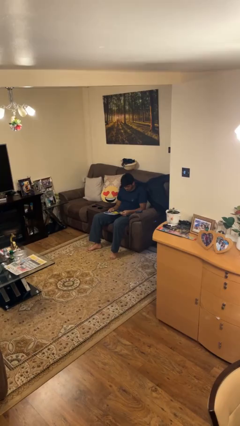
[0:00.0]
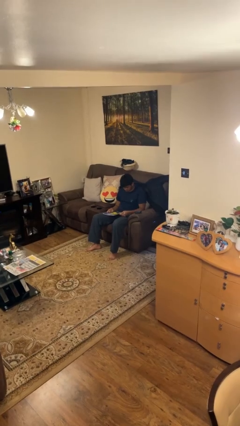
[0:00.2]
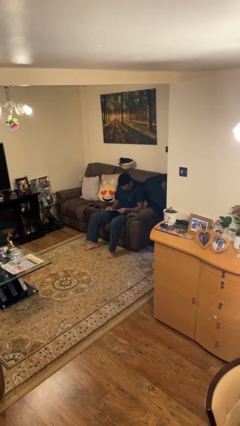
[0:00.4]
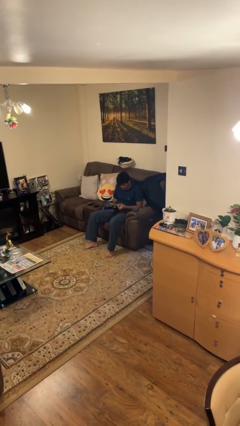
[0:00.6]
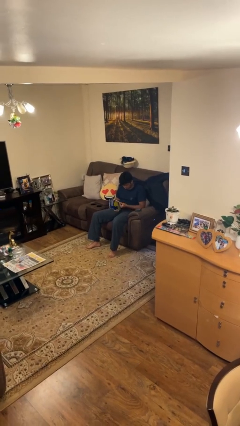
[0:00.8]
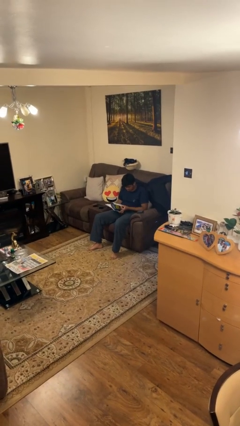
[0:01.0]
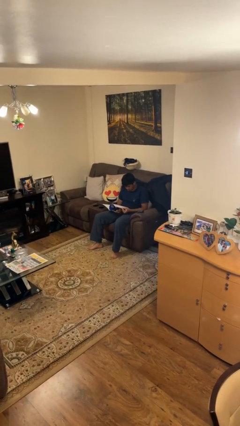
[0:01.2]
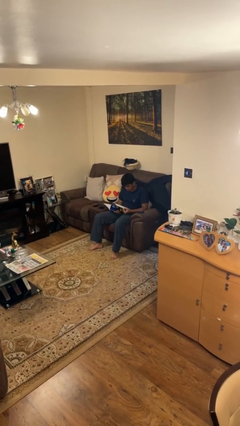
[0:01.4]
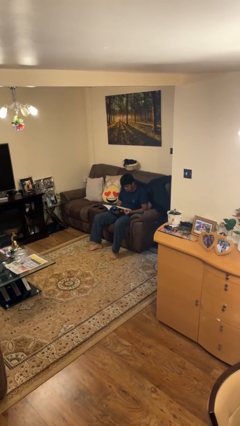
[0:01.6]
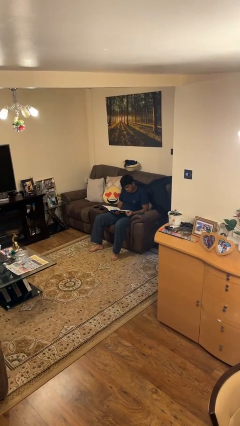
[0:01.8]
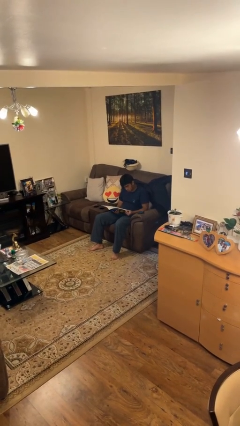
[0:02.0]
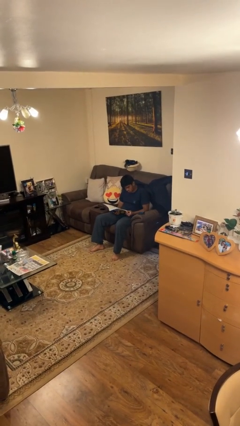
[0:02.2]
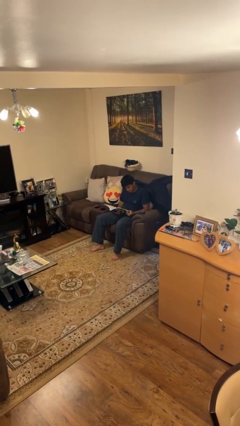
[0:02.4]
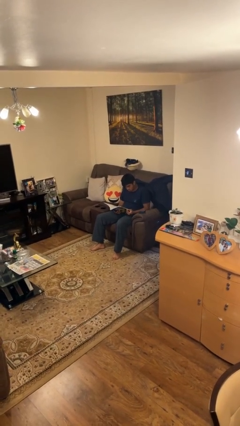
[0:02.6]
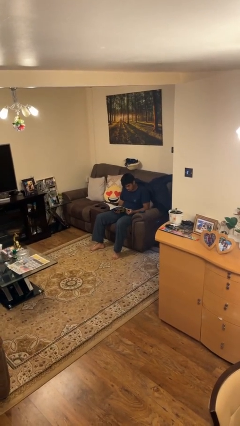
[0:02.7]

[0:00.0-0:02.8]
person reads magazine

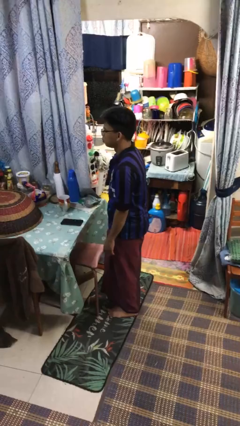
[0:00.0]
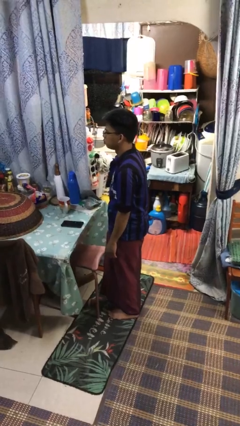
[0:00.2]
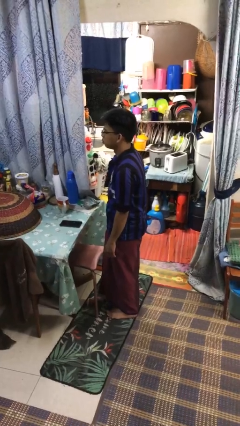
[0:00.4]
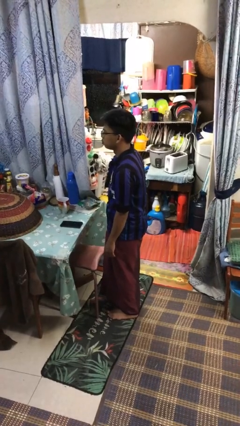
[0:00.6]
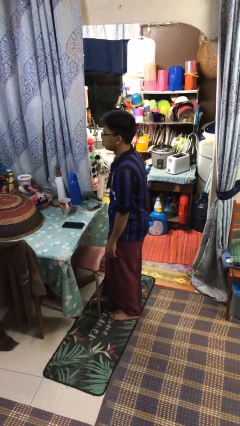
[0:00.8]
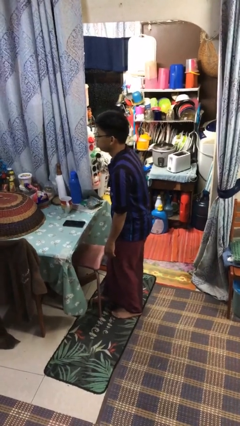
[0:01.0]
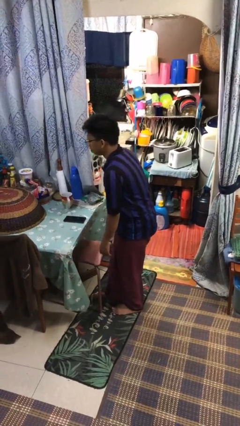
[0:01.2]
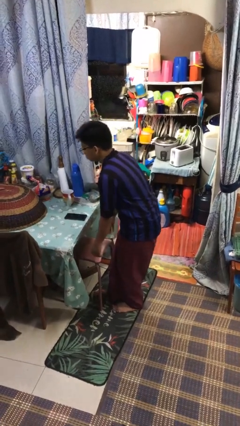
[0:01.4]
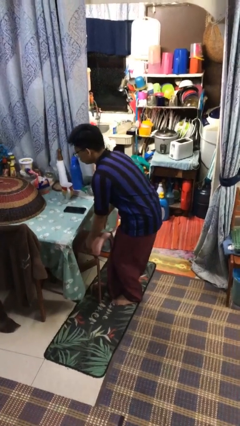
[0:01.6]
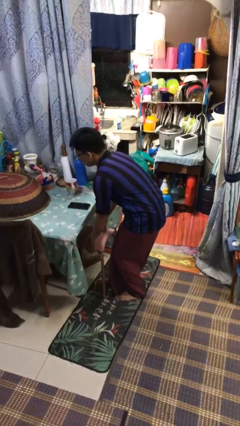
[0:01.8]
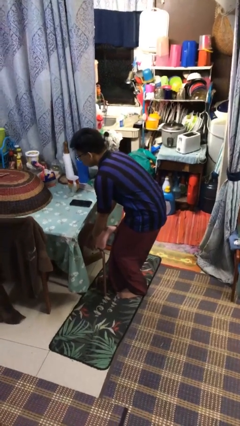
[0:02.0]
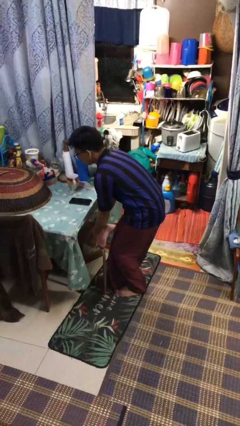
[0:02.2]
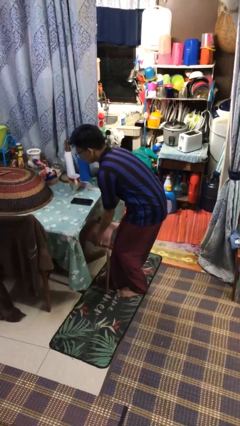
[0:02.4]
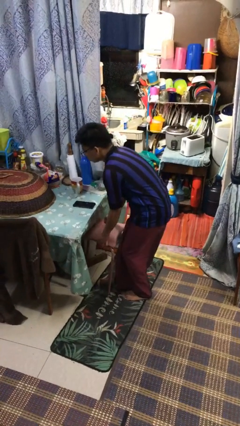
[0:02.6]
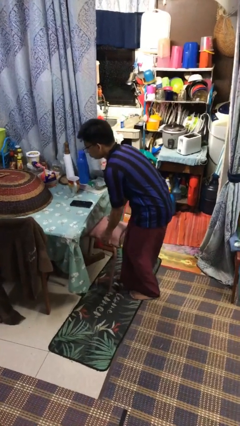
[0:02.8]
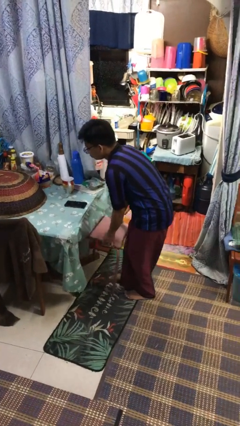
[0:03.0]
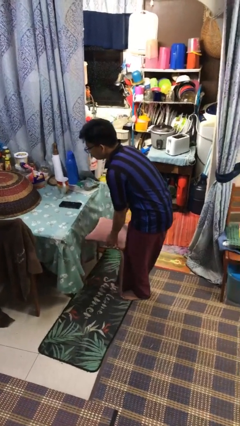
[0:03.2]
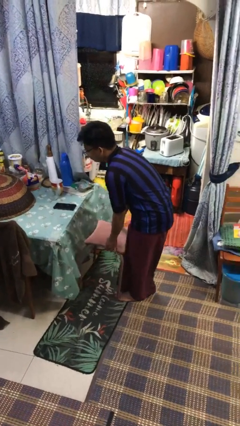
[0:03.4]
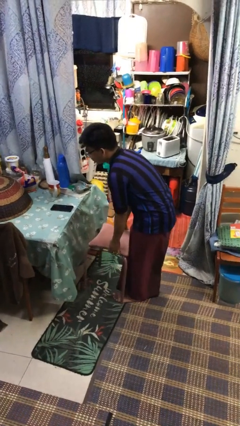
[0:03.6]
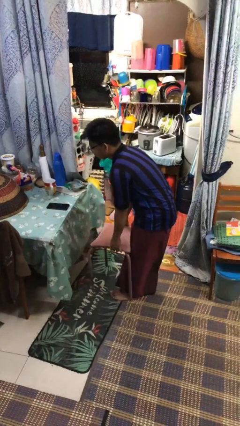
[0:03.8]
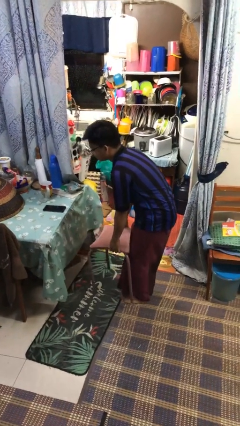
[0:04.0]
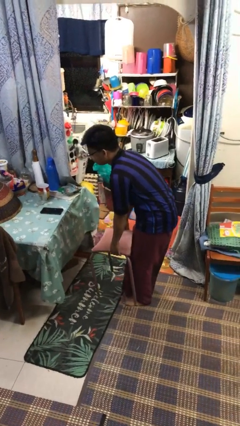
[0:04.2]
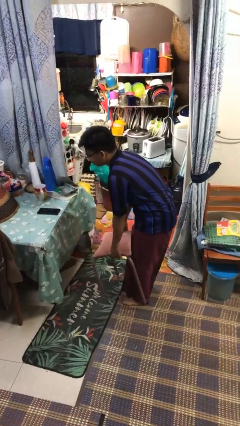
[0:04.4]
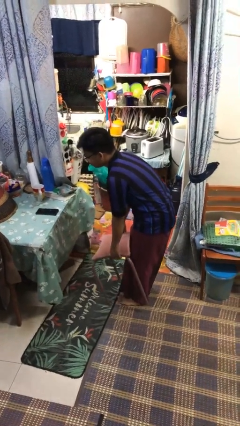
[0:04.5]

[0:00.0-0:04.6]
person pulls out chair

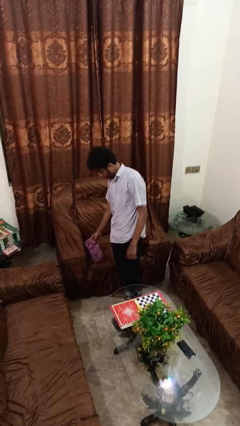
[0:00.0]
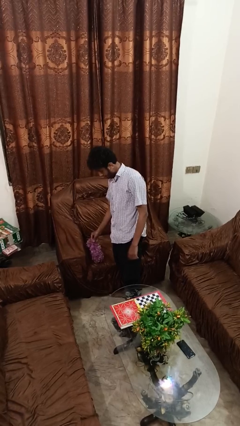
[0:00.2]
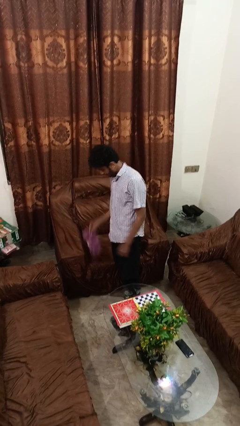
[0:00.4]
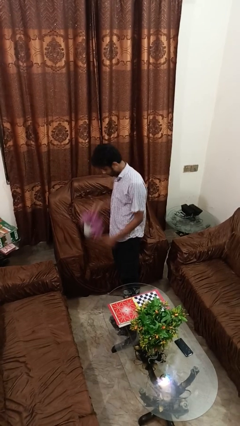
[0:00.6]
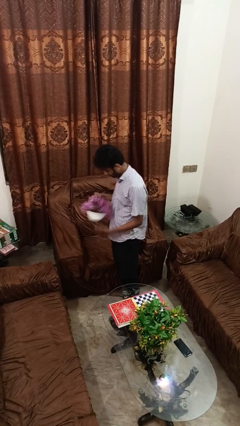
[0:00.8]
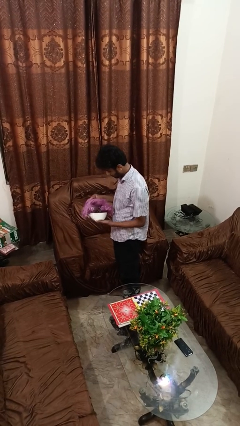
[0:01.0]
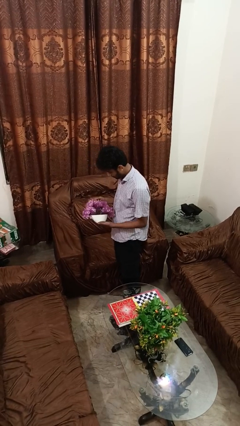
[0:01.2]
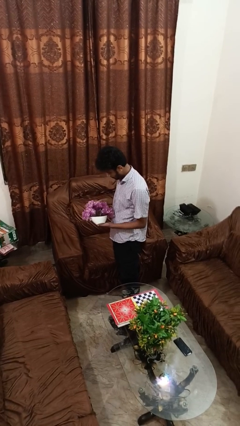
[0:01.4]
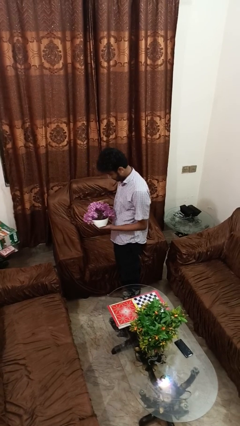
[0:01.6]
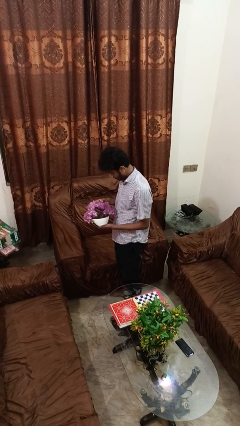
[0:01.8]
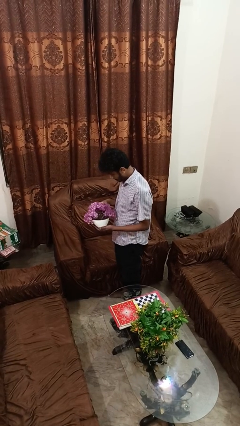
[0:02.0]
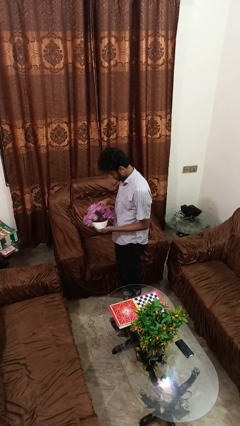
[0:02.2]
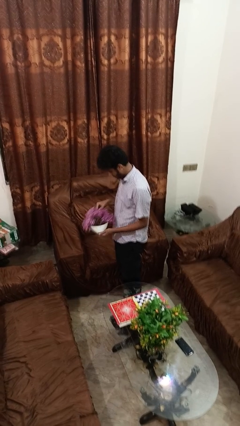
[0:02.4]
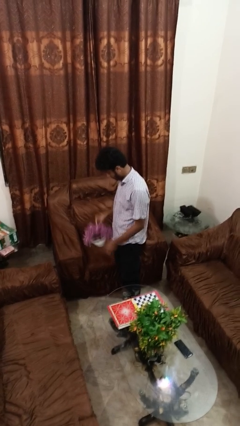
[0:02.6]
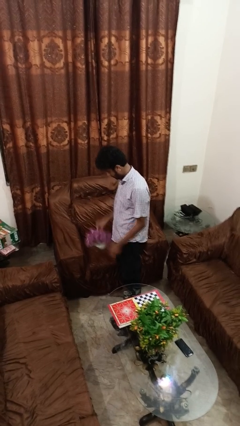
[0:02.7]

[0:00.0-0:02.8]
person picks up object from couch

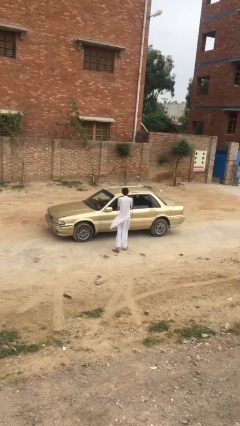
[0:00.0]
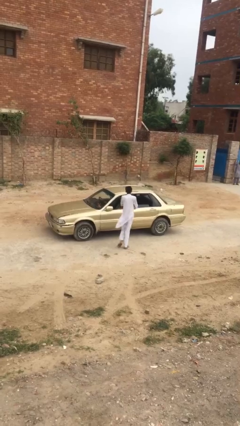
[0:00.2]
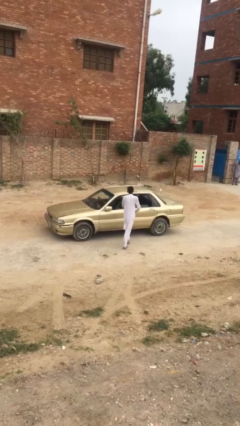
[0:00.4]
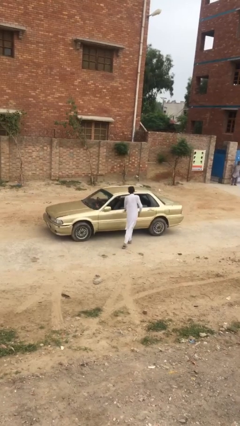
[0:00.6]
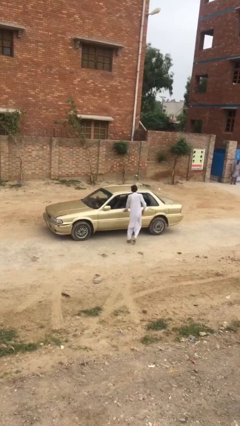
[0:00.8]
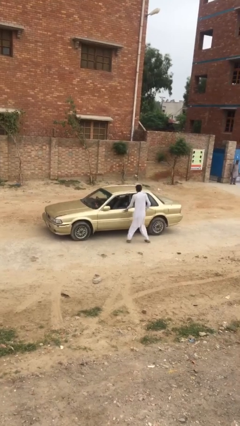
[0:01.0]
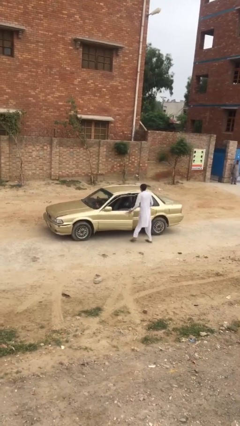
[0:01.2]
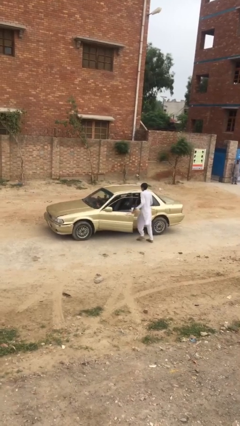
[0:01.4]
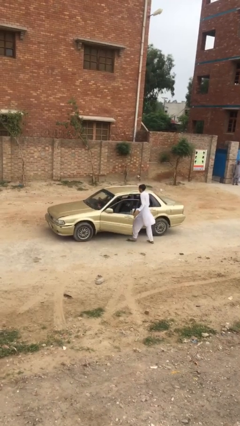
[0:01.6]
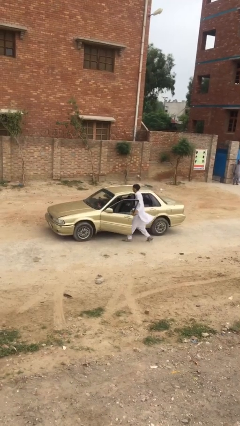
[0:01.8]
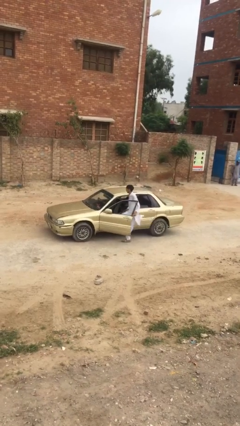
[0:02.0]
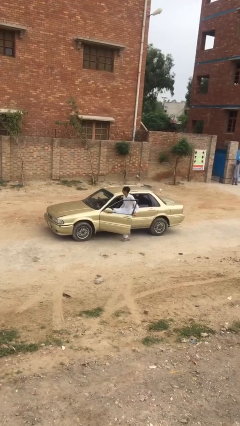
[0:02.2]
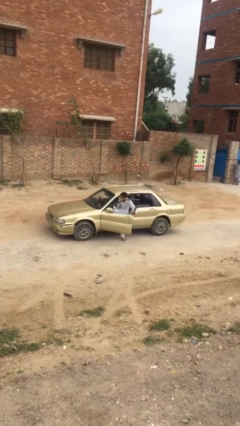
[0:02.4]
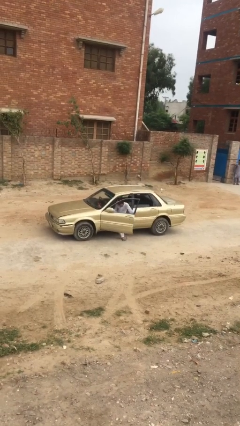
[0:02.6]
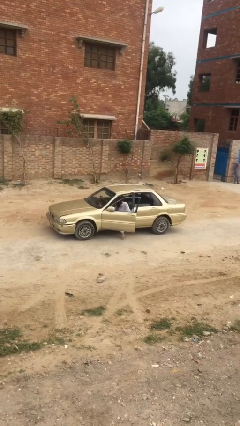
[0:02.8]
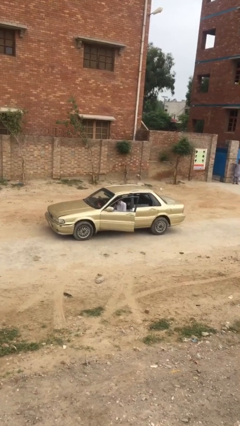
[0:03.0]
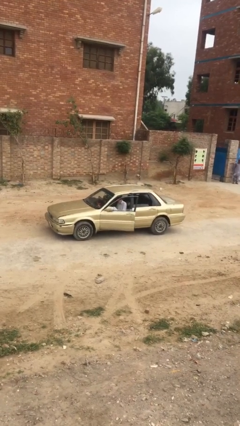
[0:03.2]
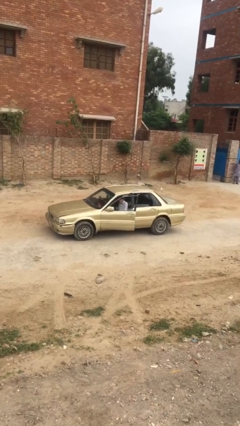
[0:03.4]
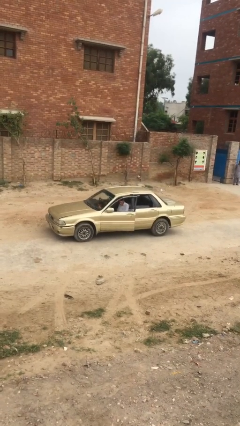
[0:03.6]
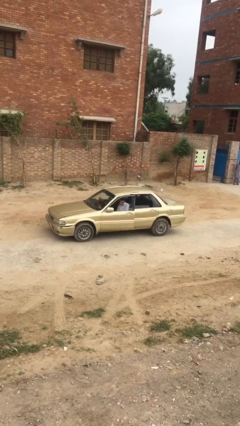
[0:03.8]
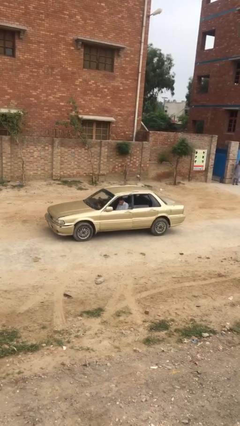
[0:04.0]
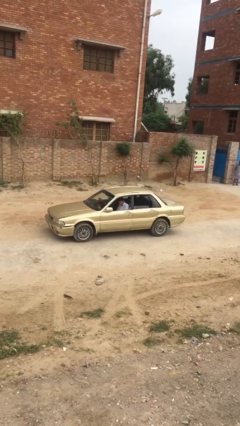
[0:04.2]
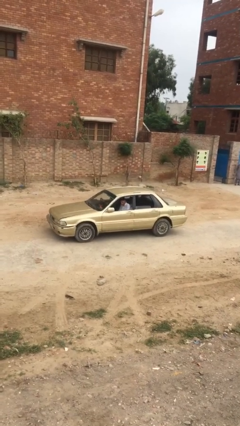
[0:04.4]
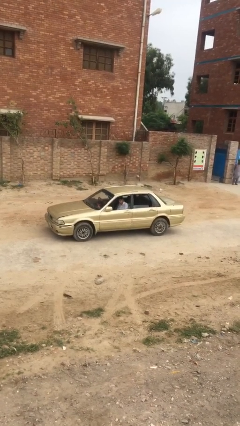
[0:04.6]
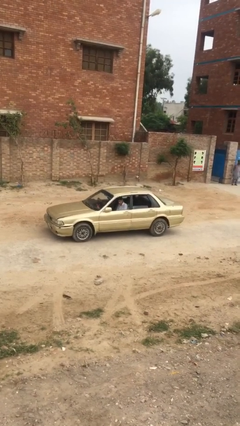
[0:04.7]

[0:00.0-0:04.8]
car picks up person

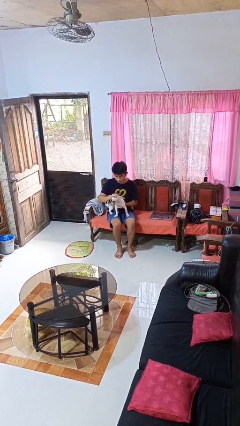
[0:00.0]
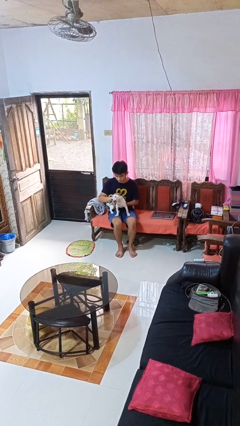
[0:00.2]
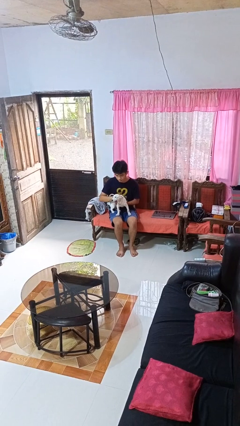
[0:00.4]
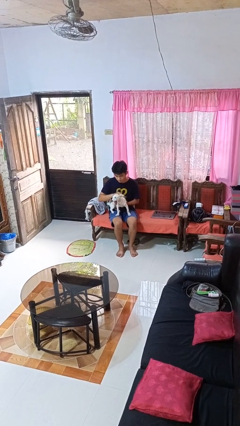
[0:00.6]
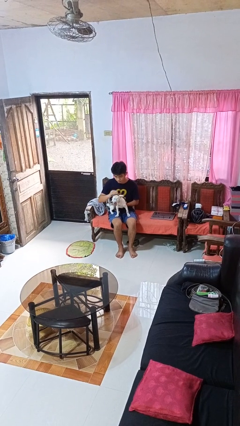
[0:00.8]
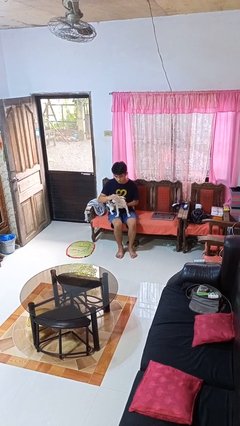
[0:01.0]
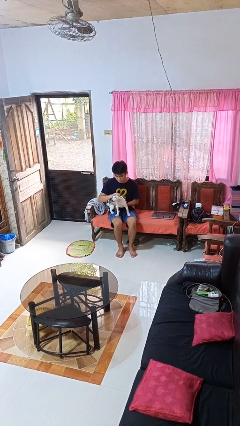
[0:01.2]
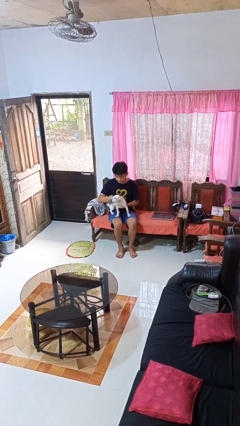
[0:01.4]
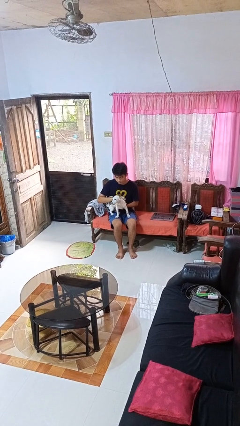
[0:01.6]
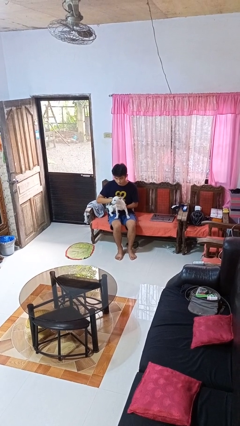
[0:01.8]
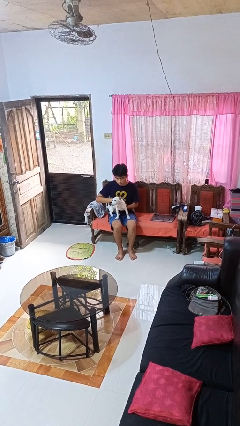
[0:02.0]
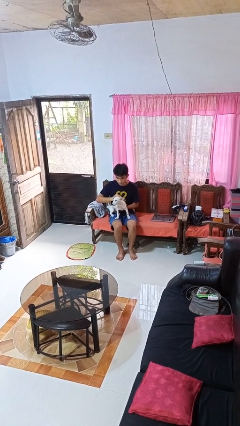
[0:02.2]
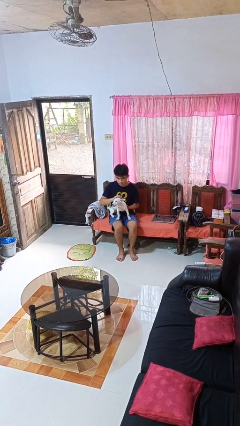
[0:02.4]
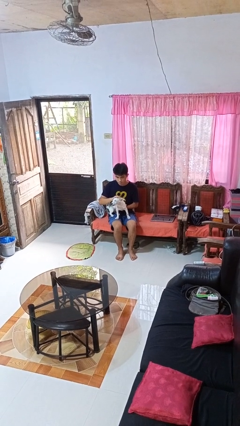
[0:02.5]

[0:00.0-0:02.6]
person pets dog

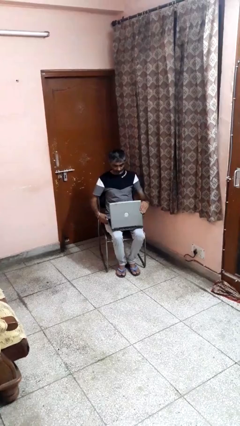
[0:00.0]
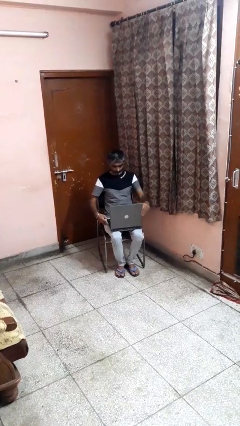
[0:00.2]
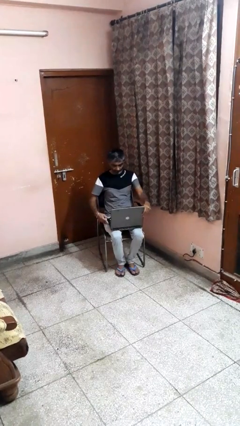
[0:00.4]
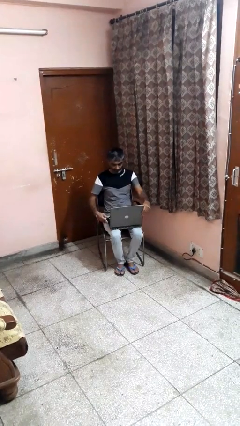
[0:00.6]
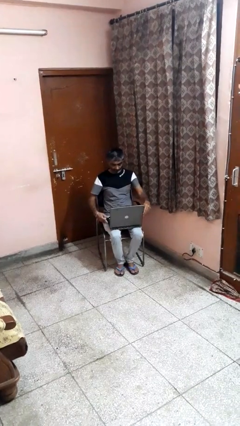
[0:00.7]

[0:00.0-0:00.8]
person opens laptop
